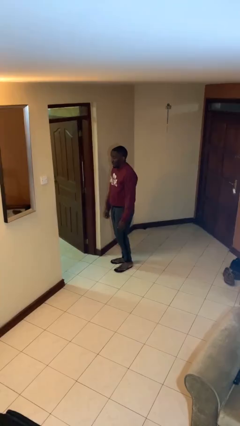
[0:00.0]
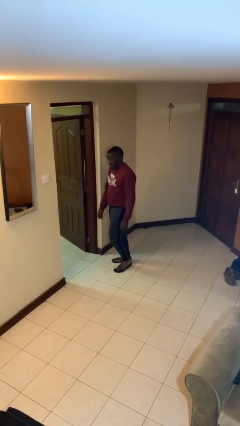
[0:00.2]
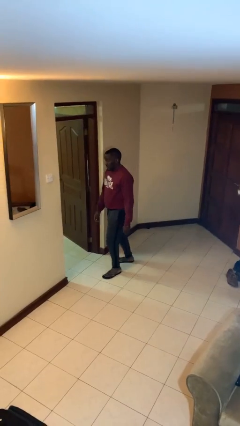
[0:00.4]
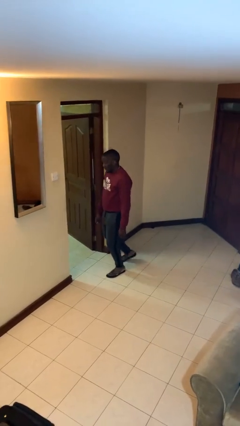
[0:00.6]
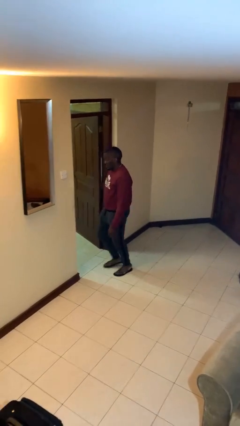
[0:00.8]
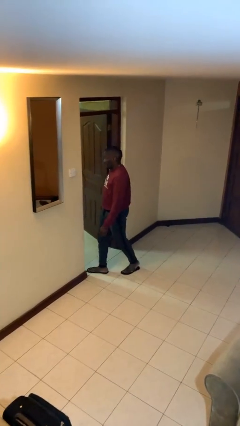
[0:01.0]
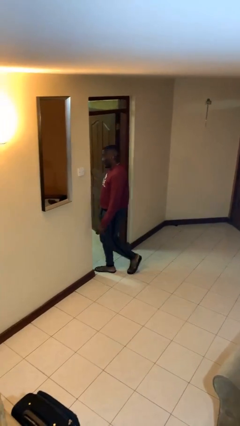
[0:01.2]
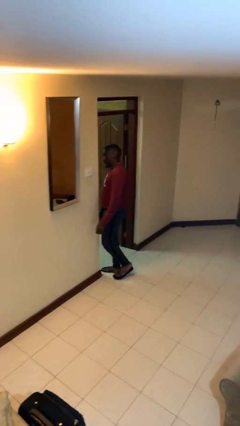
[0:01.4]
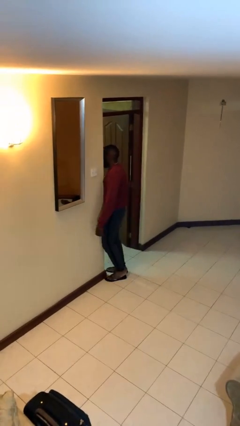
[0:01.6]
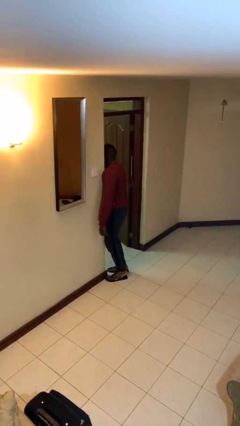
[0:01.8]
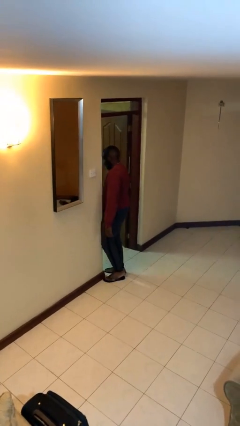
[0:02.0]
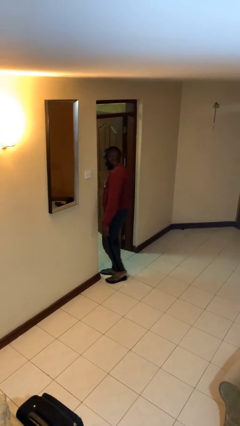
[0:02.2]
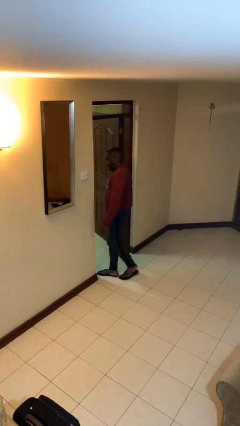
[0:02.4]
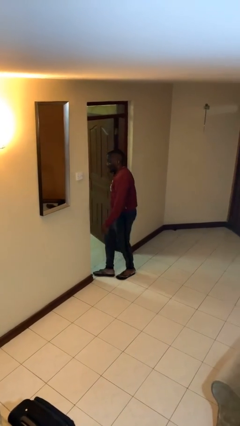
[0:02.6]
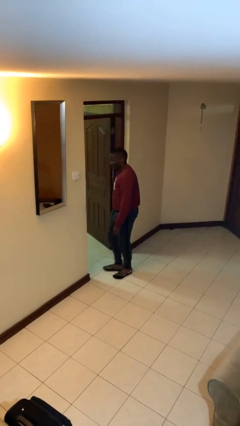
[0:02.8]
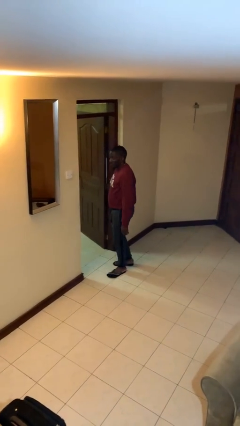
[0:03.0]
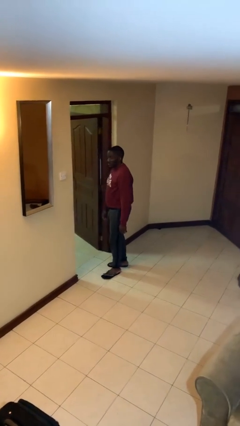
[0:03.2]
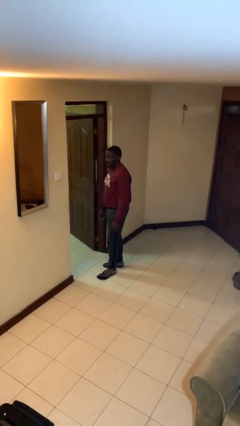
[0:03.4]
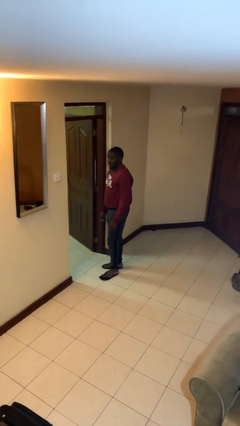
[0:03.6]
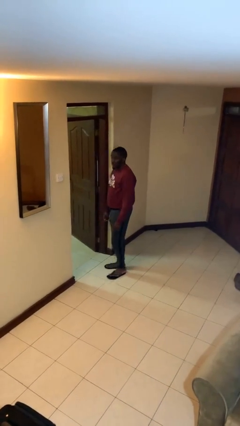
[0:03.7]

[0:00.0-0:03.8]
person bumps into wall

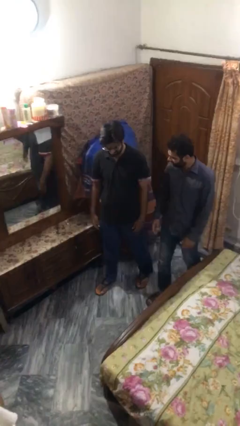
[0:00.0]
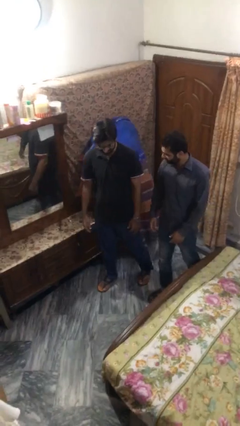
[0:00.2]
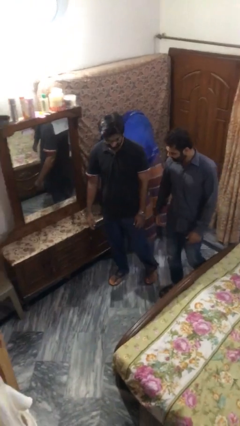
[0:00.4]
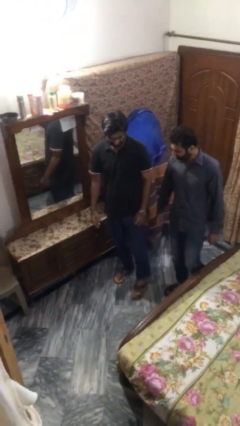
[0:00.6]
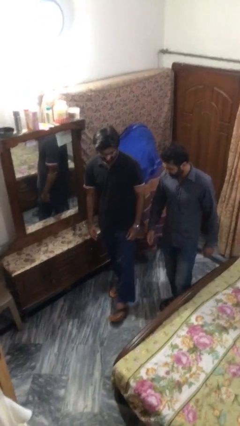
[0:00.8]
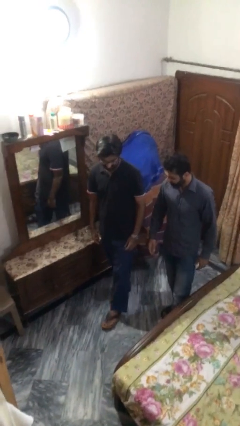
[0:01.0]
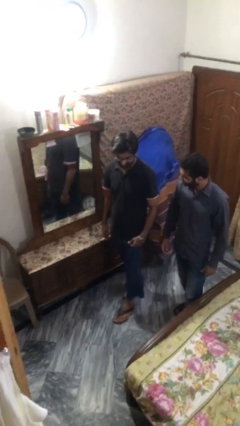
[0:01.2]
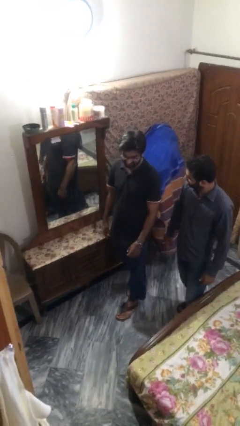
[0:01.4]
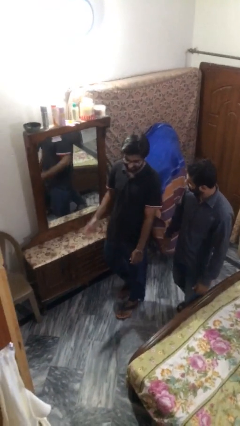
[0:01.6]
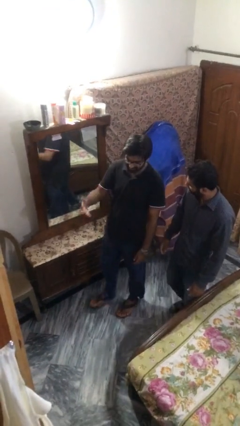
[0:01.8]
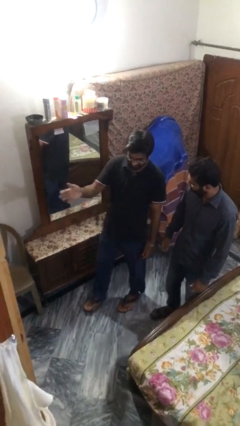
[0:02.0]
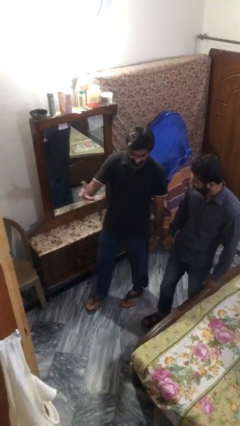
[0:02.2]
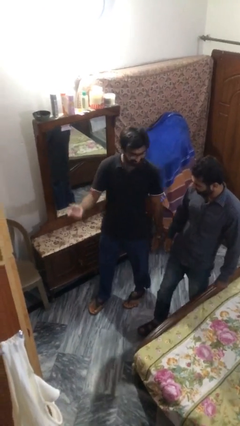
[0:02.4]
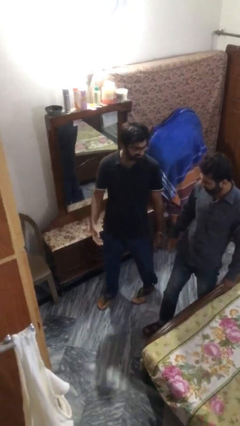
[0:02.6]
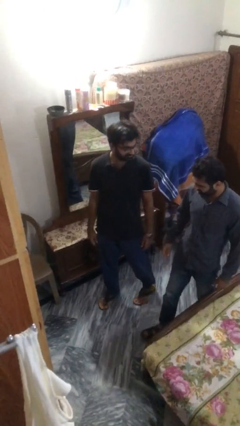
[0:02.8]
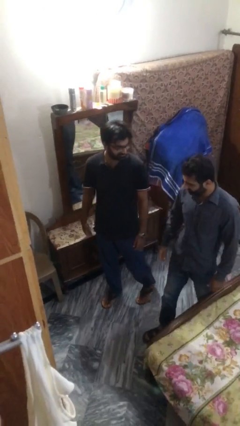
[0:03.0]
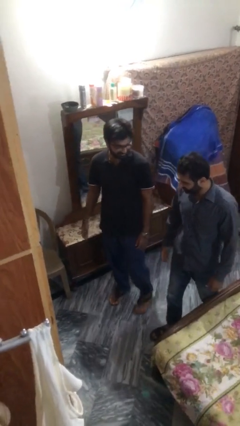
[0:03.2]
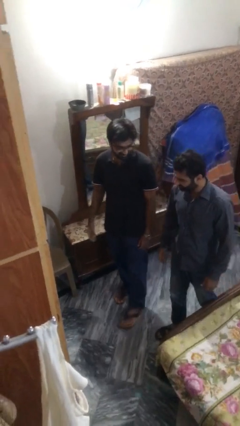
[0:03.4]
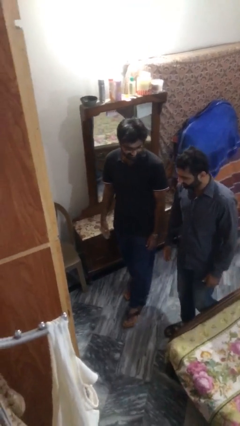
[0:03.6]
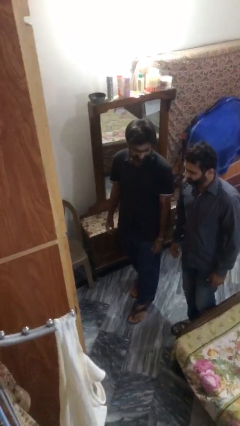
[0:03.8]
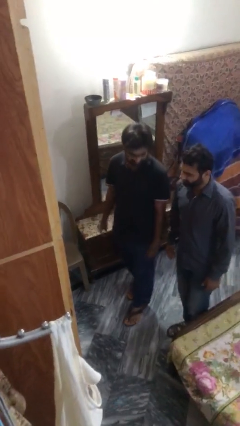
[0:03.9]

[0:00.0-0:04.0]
person talks to person

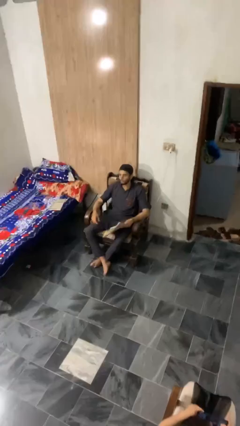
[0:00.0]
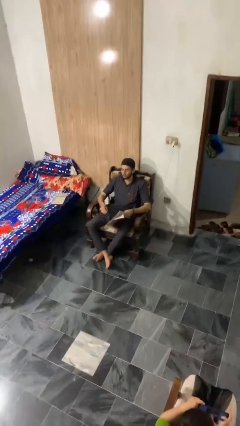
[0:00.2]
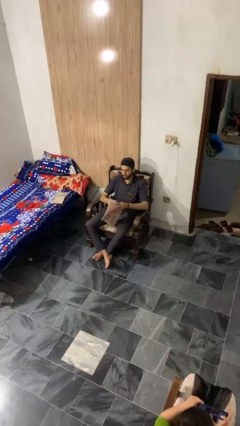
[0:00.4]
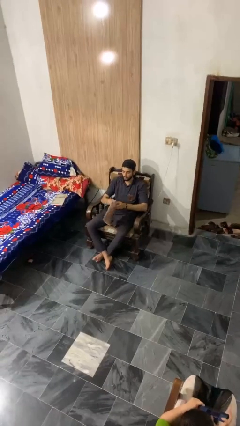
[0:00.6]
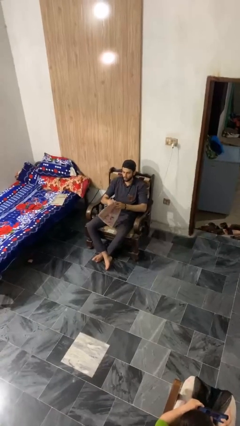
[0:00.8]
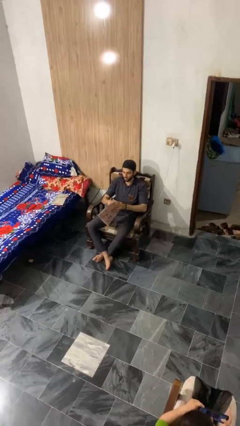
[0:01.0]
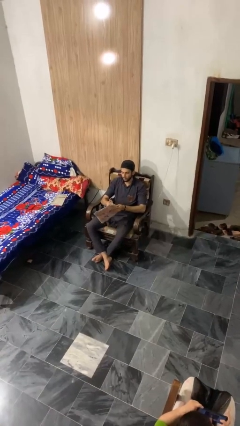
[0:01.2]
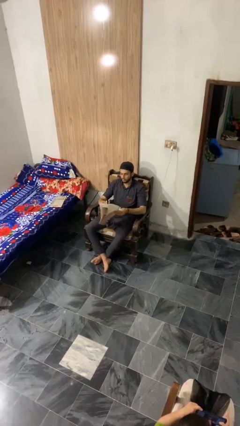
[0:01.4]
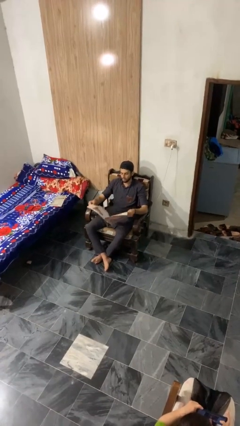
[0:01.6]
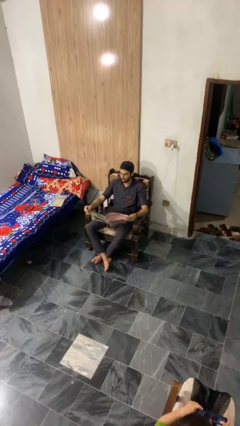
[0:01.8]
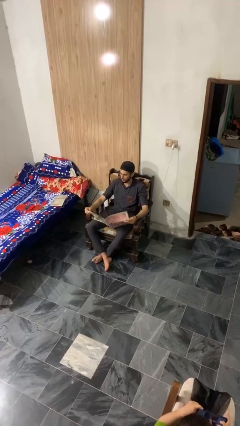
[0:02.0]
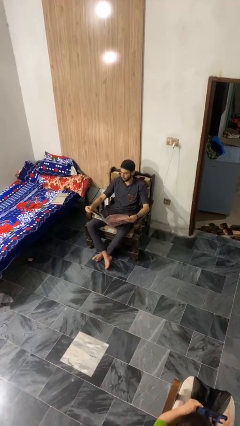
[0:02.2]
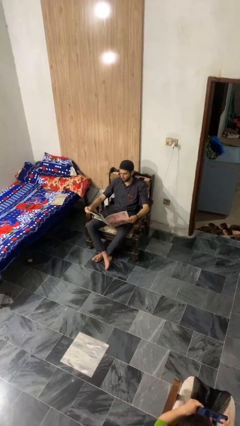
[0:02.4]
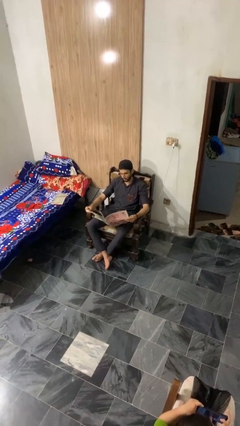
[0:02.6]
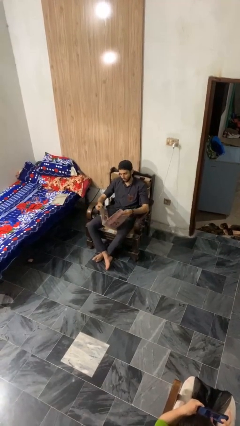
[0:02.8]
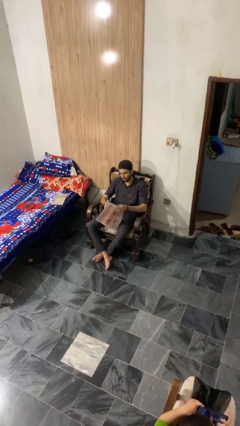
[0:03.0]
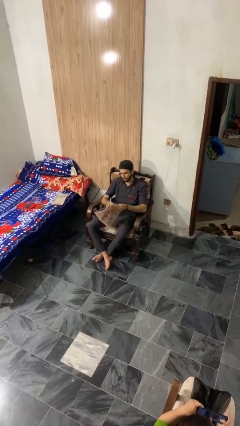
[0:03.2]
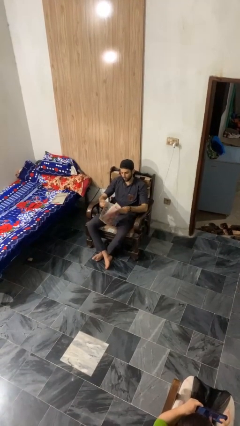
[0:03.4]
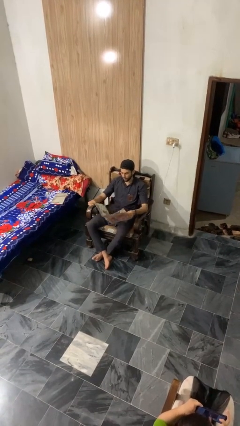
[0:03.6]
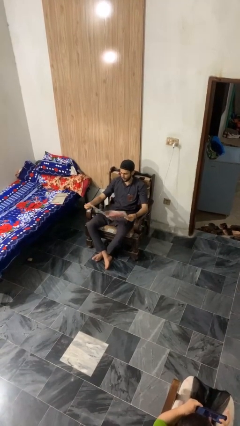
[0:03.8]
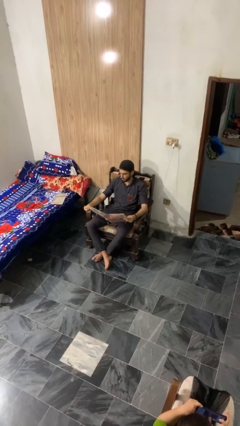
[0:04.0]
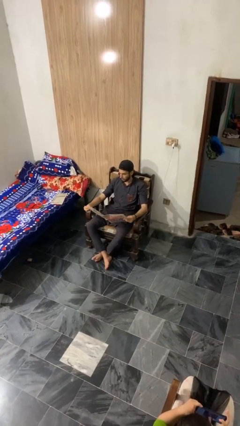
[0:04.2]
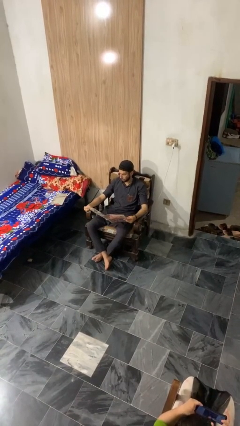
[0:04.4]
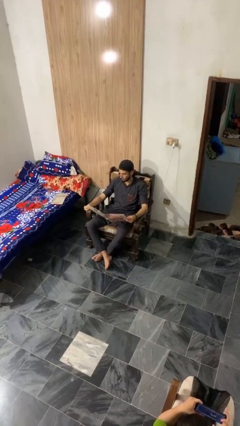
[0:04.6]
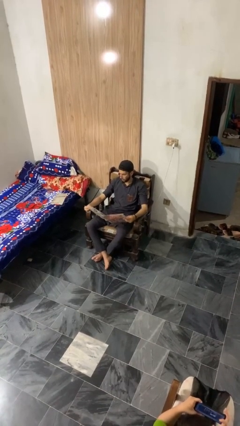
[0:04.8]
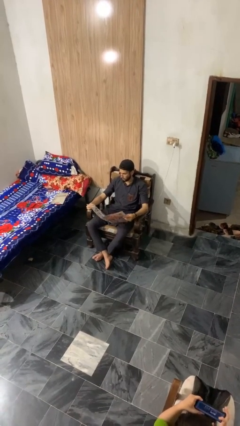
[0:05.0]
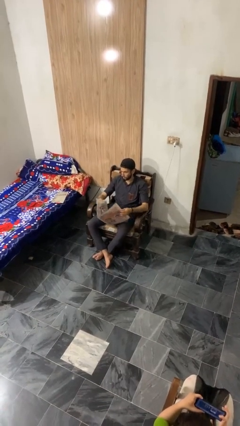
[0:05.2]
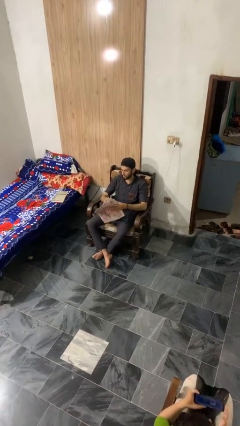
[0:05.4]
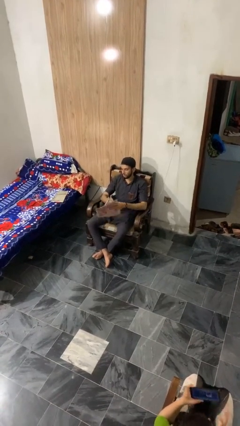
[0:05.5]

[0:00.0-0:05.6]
person reads magazine

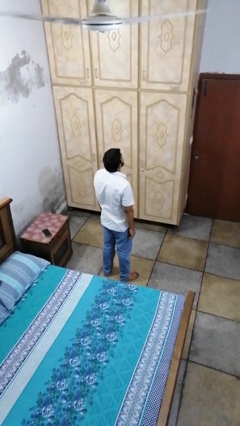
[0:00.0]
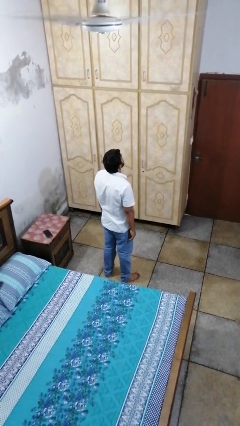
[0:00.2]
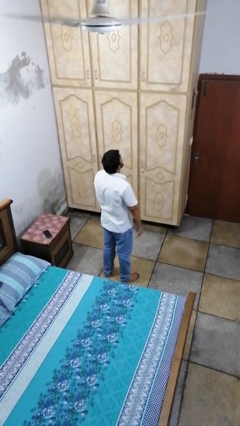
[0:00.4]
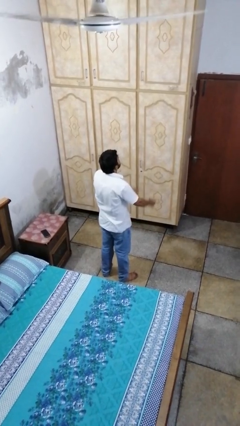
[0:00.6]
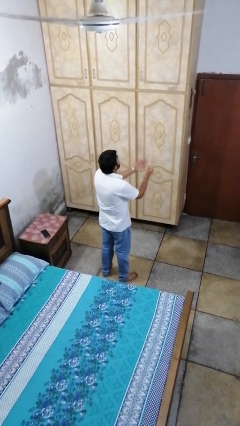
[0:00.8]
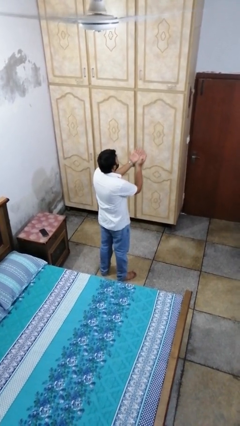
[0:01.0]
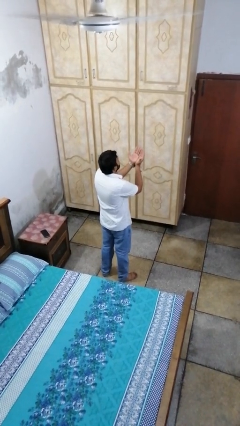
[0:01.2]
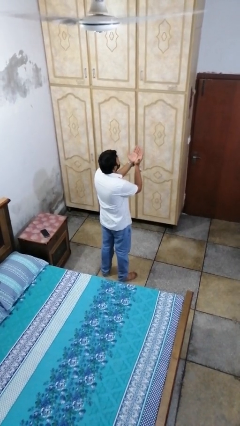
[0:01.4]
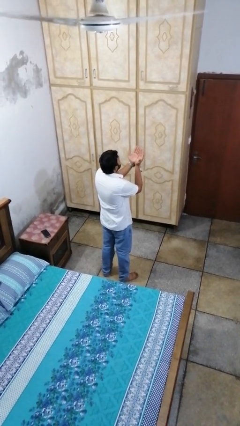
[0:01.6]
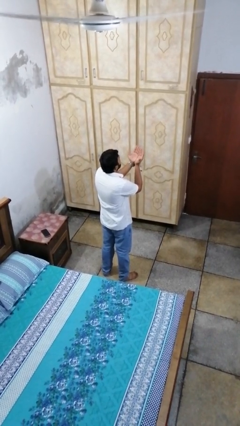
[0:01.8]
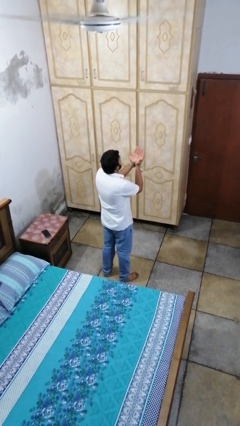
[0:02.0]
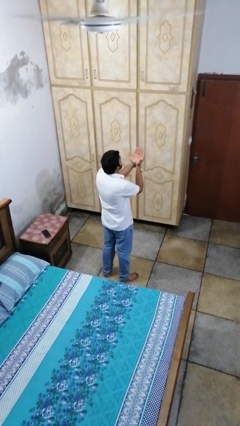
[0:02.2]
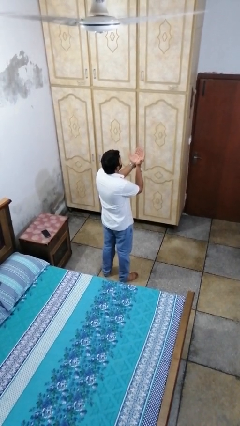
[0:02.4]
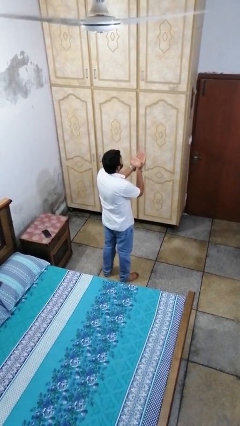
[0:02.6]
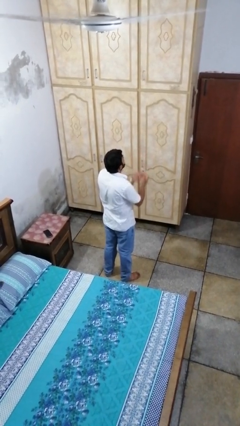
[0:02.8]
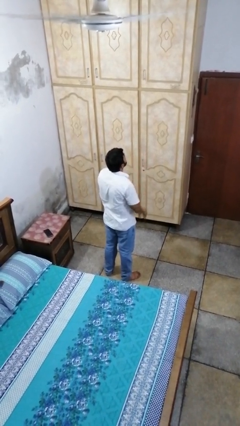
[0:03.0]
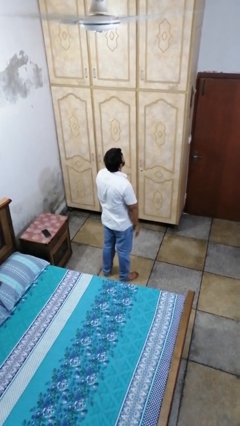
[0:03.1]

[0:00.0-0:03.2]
person prays

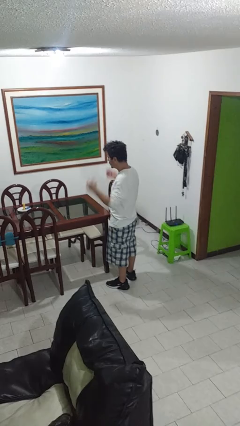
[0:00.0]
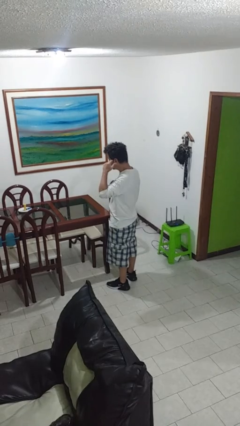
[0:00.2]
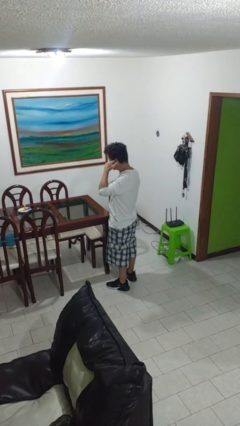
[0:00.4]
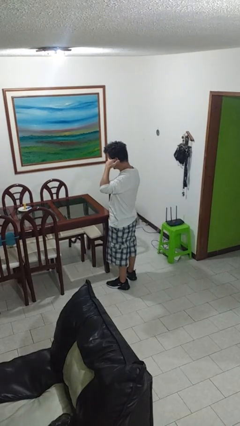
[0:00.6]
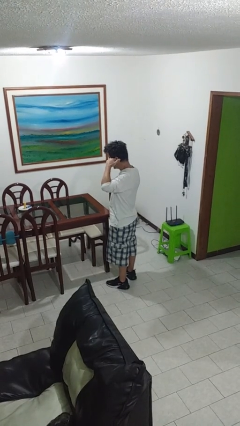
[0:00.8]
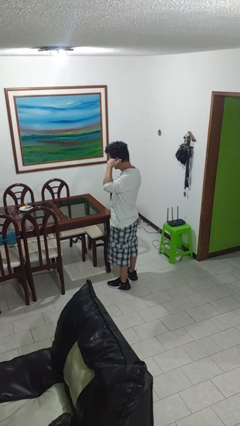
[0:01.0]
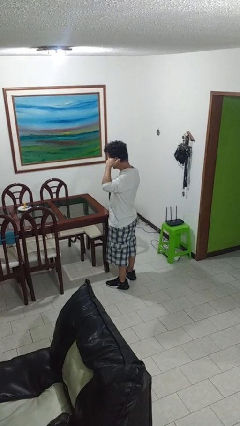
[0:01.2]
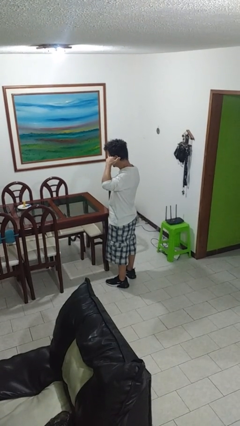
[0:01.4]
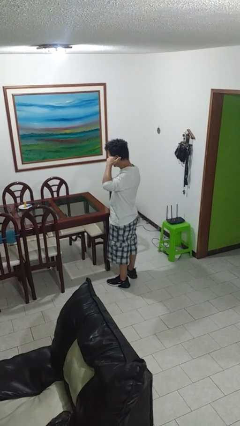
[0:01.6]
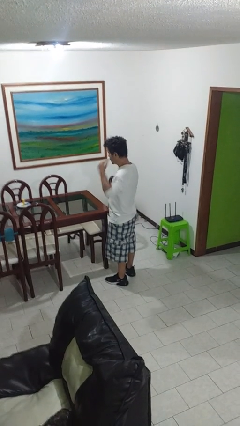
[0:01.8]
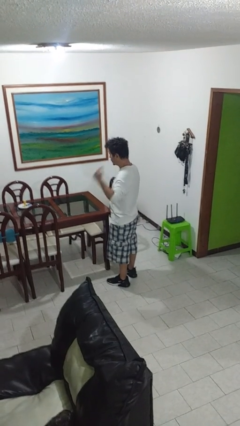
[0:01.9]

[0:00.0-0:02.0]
person puts fingers in ear
